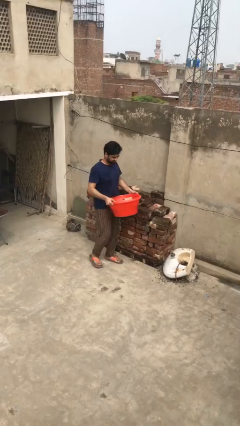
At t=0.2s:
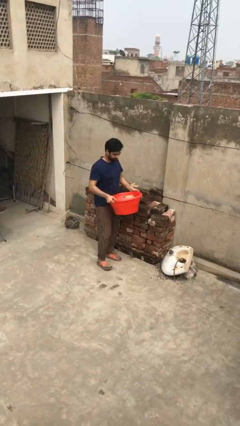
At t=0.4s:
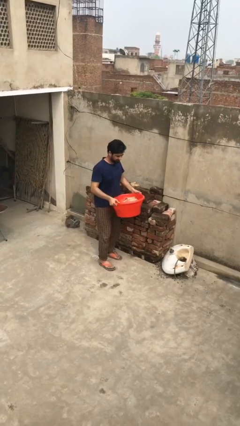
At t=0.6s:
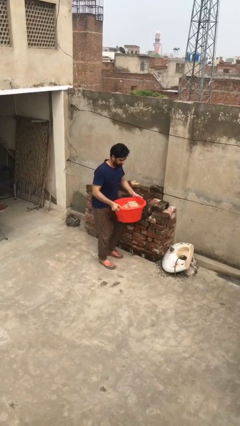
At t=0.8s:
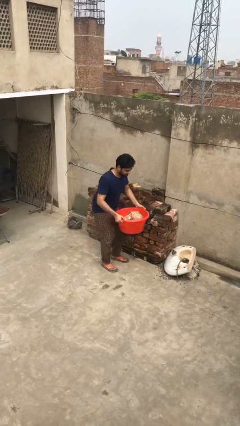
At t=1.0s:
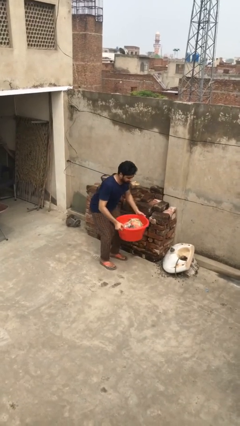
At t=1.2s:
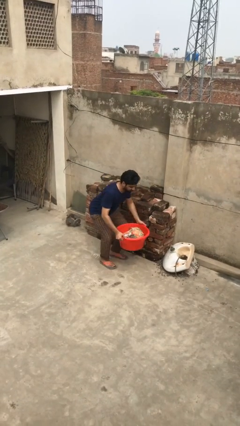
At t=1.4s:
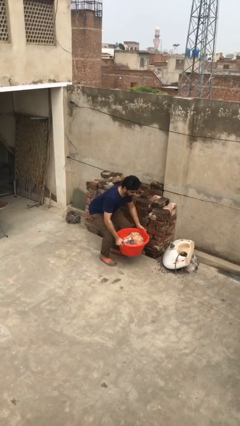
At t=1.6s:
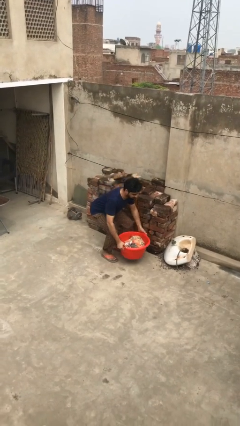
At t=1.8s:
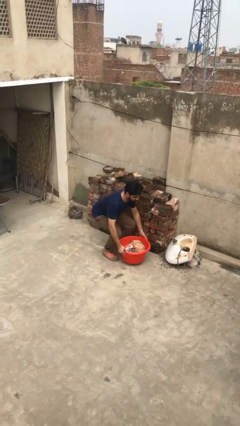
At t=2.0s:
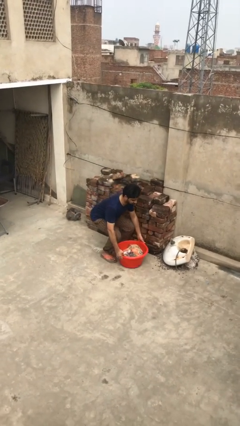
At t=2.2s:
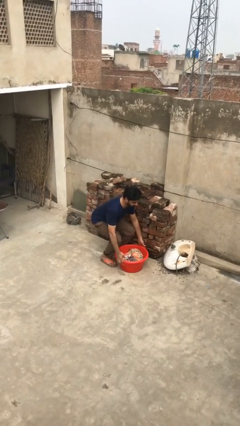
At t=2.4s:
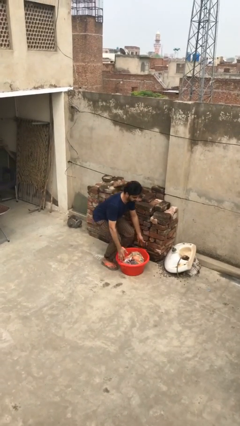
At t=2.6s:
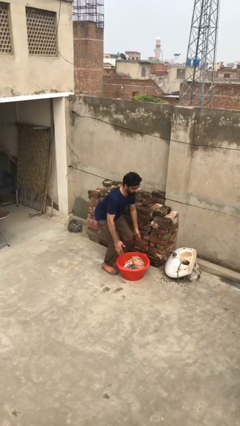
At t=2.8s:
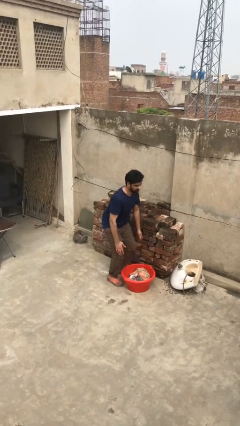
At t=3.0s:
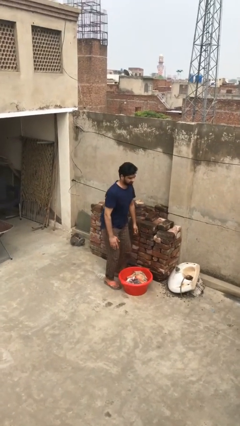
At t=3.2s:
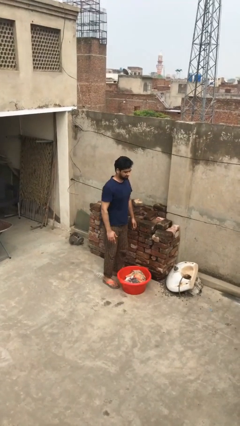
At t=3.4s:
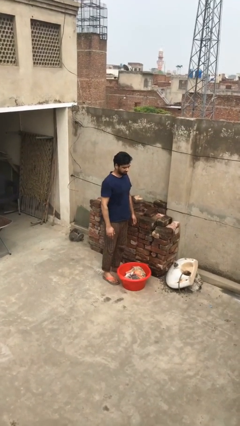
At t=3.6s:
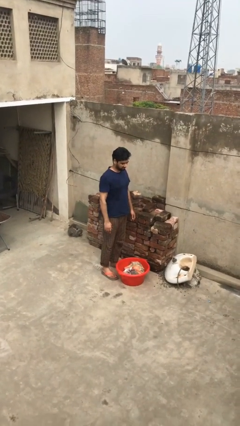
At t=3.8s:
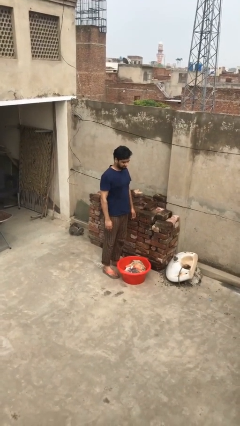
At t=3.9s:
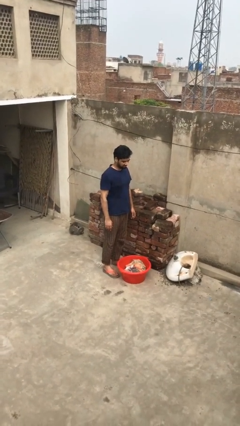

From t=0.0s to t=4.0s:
person puts down object on floor

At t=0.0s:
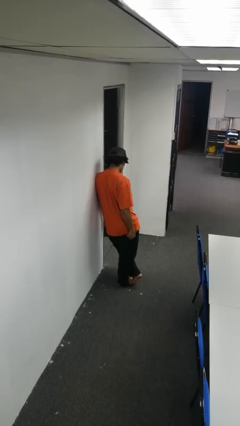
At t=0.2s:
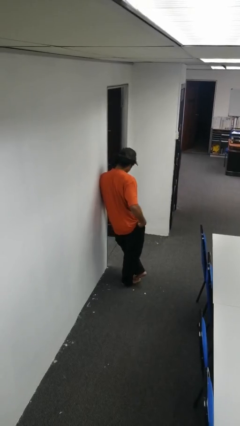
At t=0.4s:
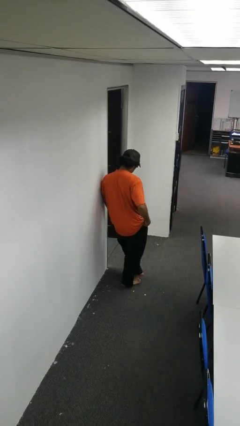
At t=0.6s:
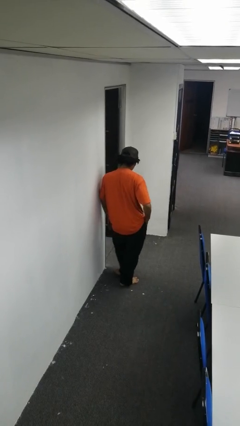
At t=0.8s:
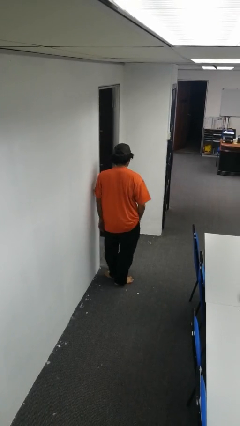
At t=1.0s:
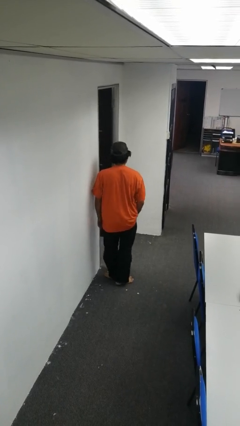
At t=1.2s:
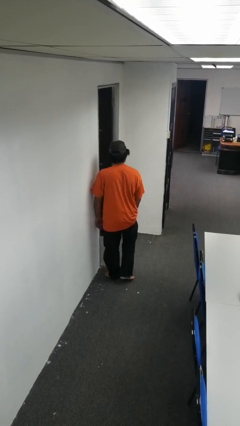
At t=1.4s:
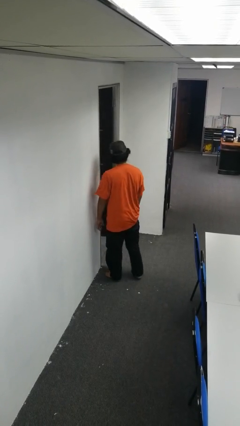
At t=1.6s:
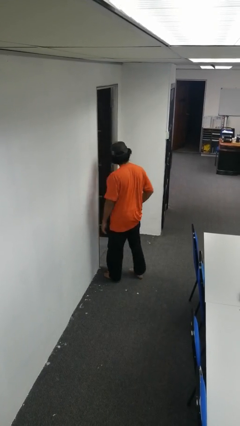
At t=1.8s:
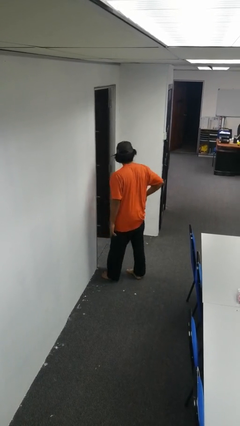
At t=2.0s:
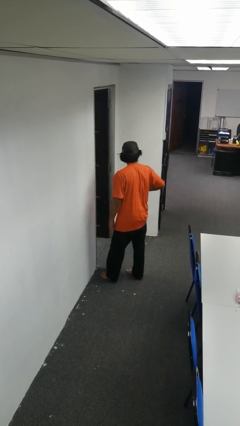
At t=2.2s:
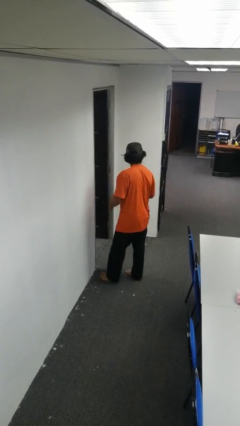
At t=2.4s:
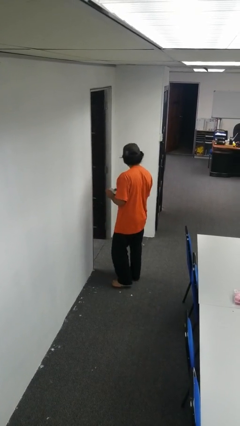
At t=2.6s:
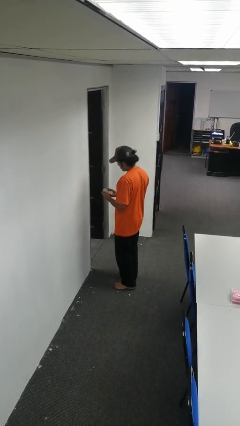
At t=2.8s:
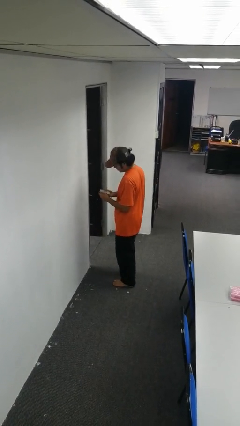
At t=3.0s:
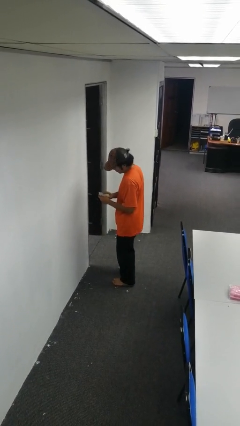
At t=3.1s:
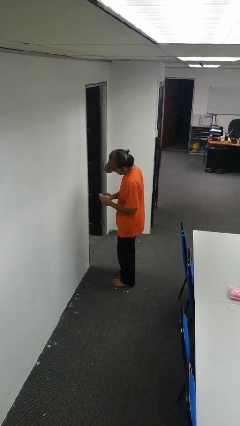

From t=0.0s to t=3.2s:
person takes phone from pocket

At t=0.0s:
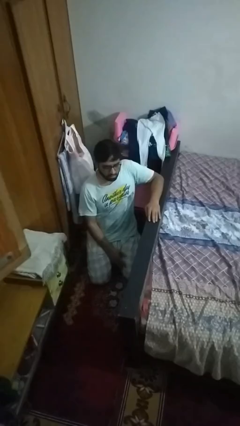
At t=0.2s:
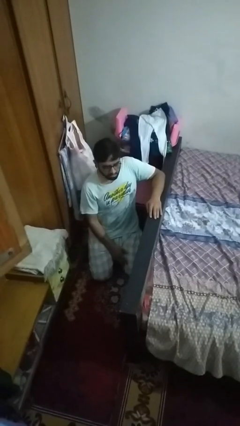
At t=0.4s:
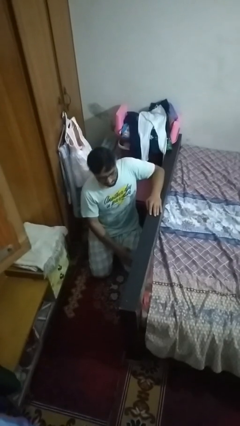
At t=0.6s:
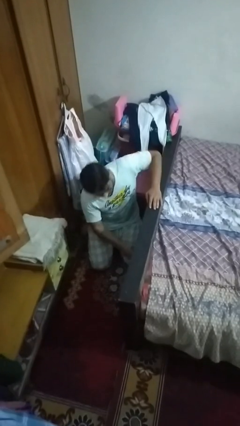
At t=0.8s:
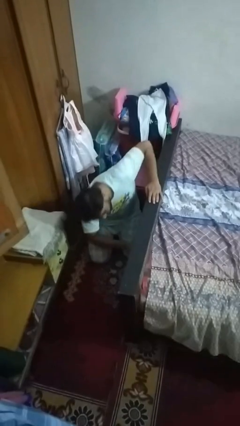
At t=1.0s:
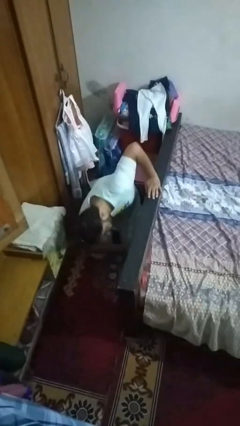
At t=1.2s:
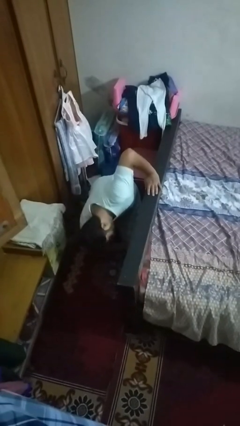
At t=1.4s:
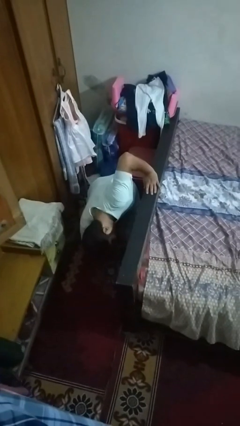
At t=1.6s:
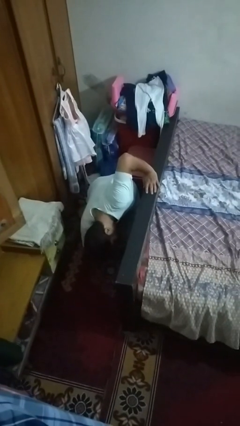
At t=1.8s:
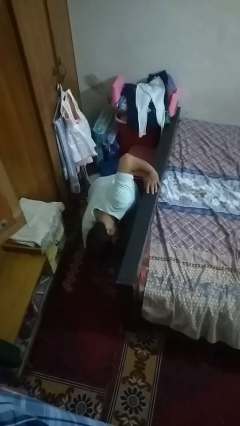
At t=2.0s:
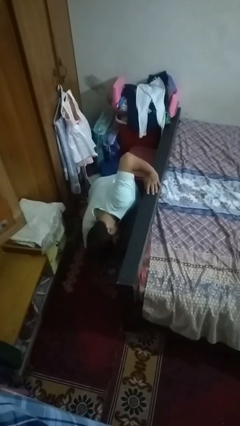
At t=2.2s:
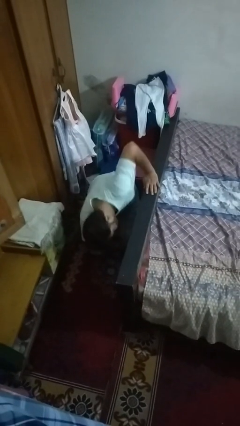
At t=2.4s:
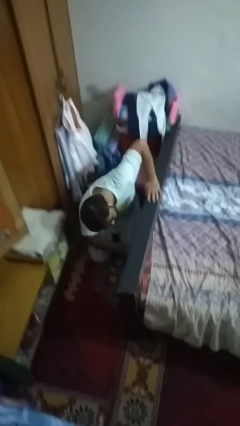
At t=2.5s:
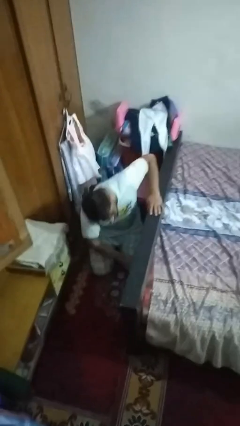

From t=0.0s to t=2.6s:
person searches under bed

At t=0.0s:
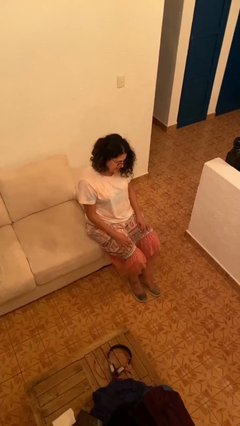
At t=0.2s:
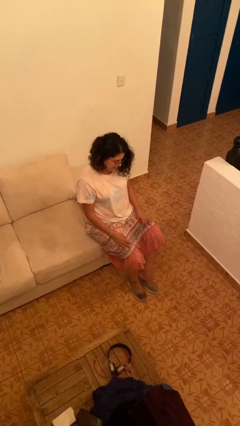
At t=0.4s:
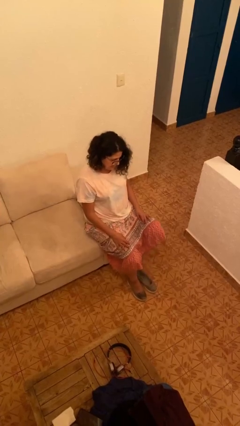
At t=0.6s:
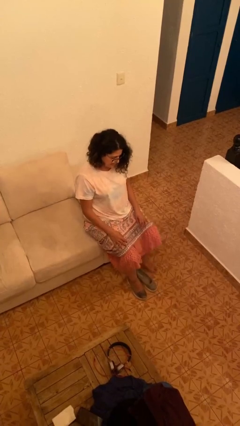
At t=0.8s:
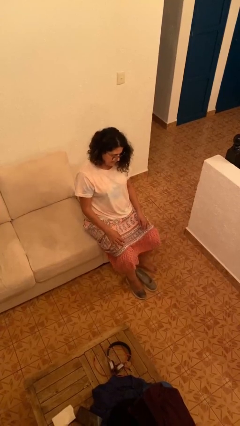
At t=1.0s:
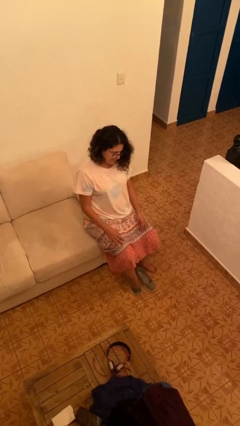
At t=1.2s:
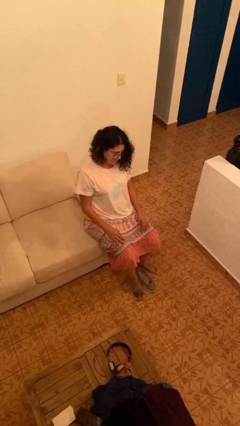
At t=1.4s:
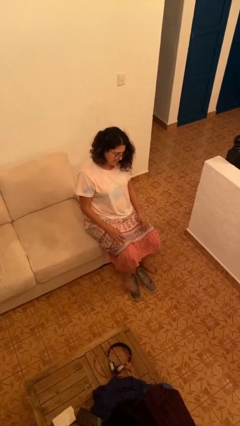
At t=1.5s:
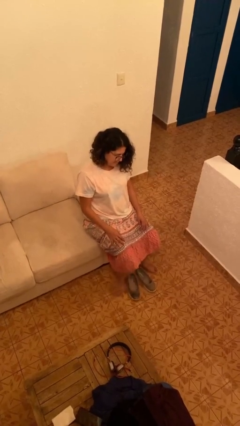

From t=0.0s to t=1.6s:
person takes off shoes

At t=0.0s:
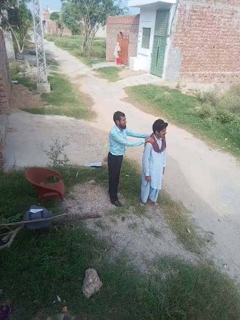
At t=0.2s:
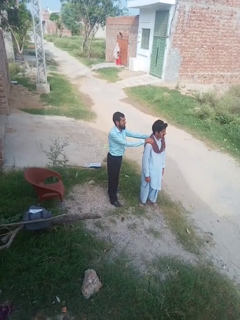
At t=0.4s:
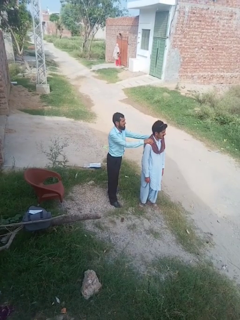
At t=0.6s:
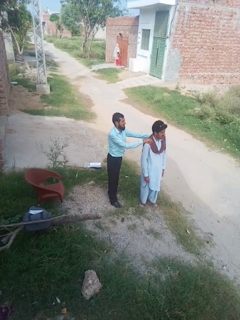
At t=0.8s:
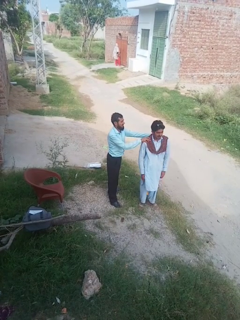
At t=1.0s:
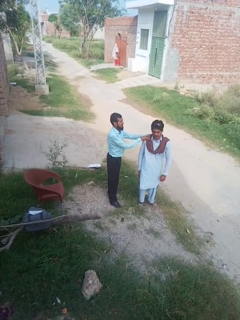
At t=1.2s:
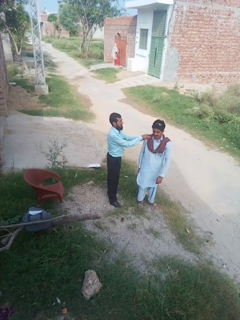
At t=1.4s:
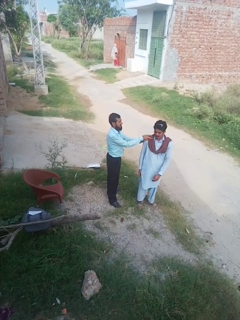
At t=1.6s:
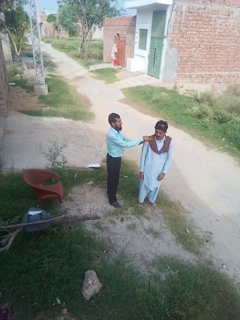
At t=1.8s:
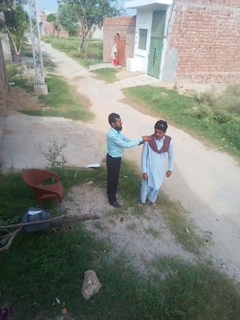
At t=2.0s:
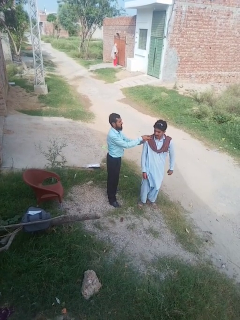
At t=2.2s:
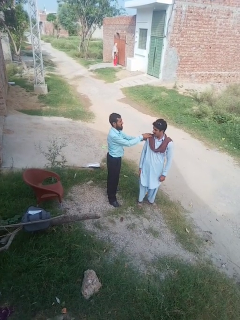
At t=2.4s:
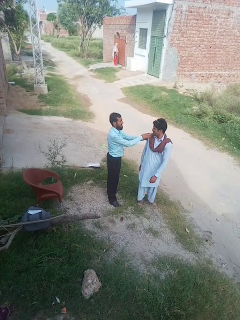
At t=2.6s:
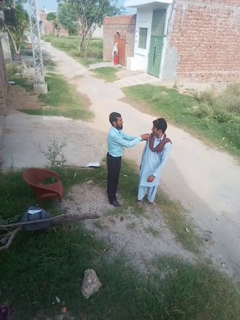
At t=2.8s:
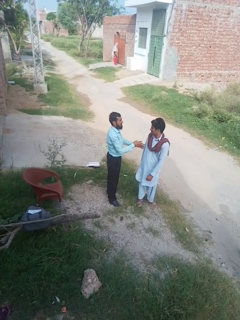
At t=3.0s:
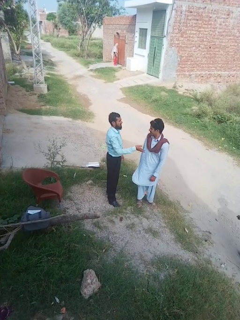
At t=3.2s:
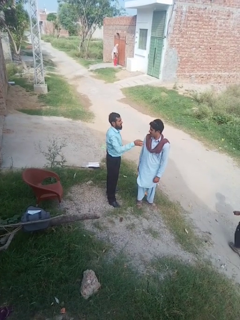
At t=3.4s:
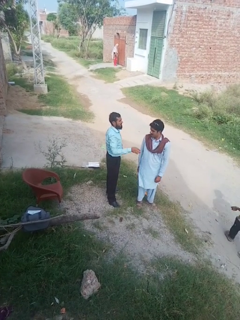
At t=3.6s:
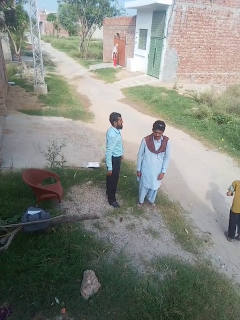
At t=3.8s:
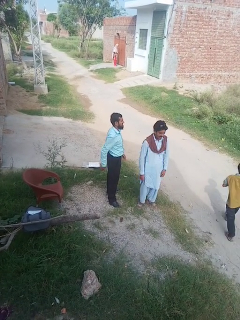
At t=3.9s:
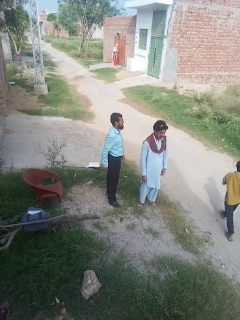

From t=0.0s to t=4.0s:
person spins person around

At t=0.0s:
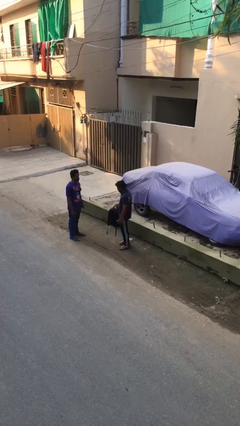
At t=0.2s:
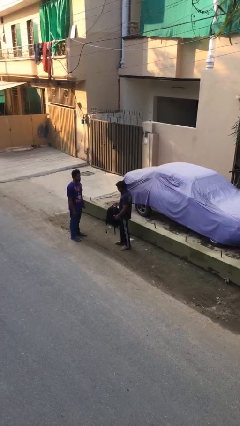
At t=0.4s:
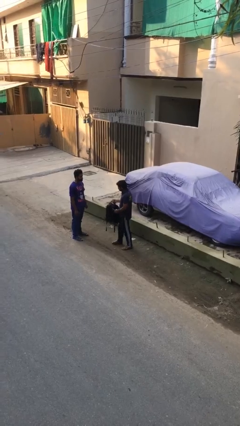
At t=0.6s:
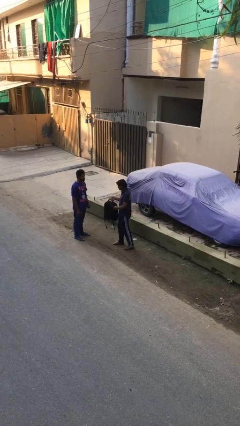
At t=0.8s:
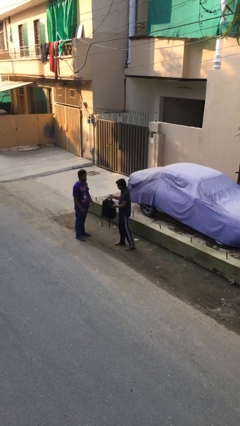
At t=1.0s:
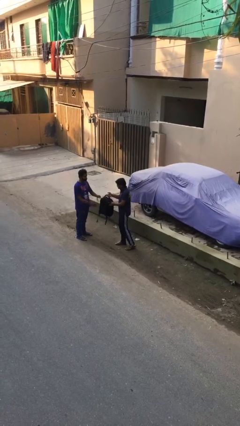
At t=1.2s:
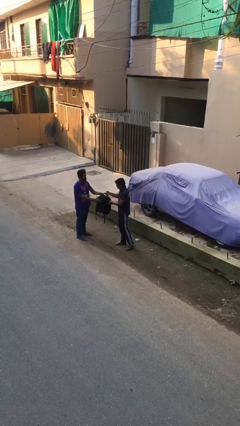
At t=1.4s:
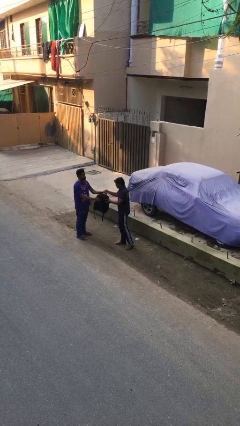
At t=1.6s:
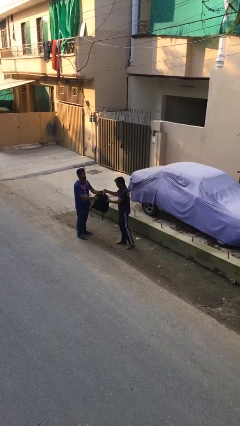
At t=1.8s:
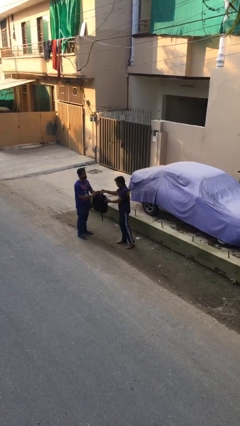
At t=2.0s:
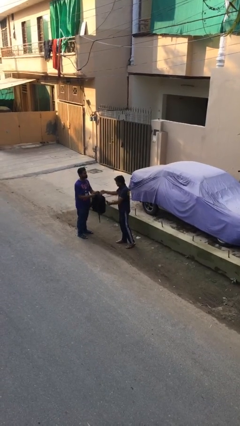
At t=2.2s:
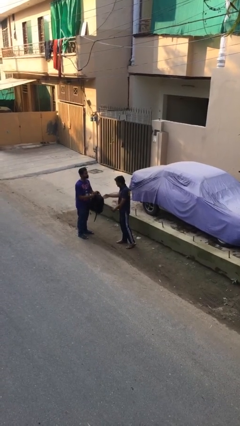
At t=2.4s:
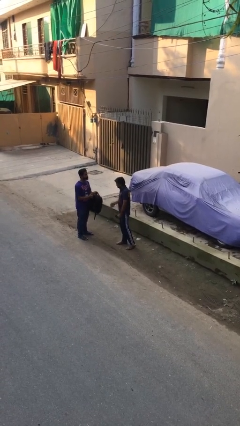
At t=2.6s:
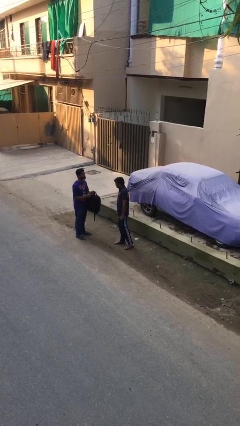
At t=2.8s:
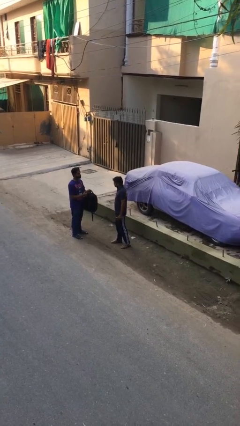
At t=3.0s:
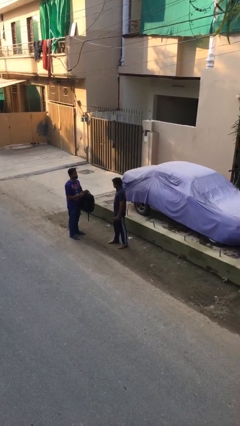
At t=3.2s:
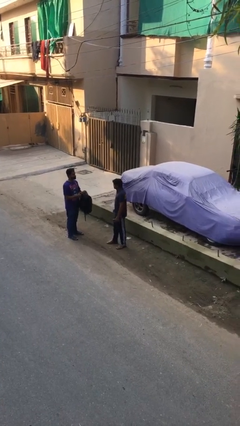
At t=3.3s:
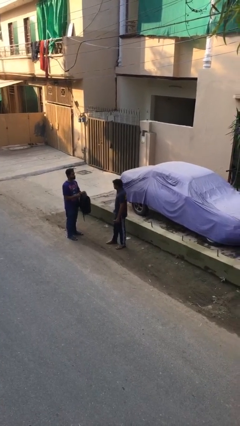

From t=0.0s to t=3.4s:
person transfers object to person
